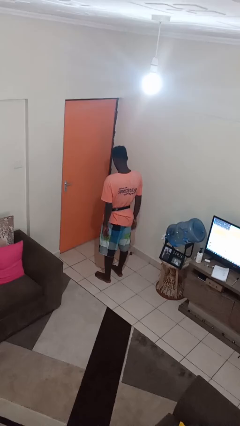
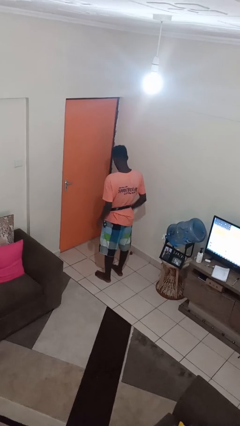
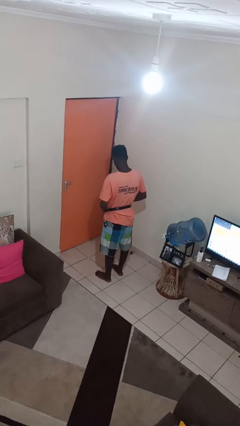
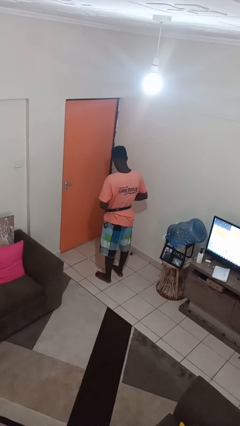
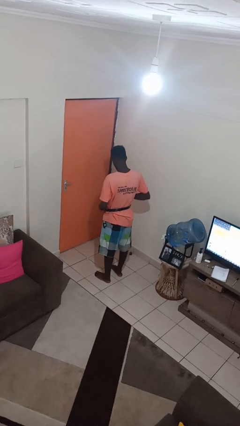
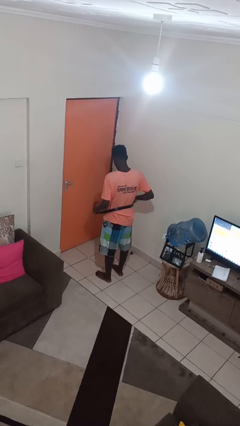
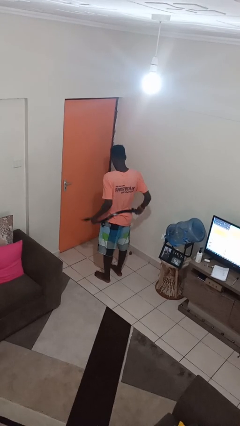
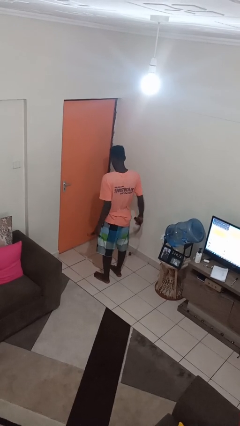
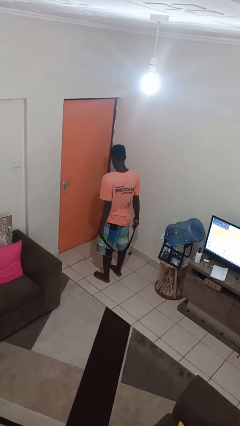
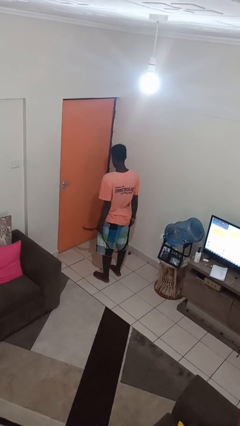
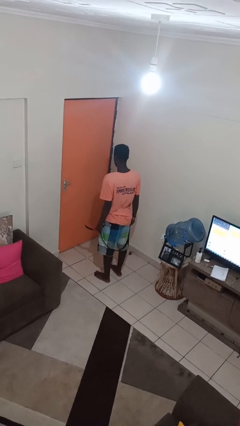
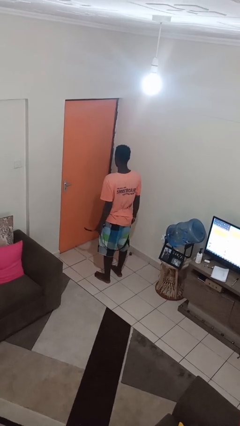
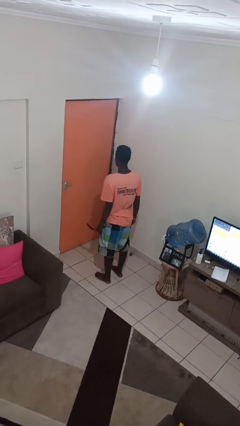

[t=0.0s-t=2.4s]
person takes off belt

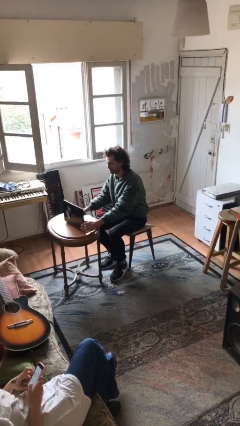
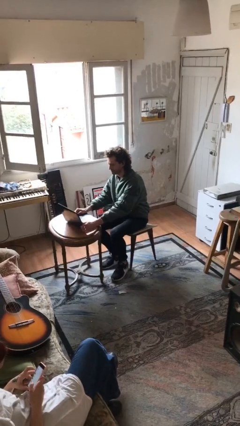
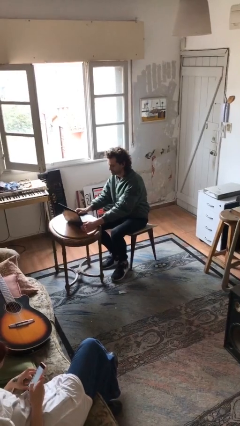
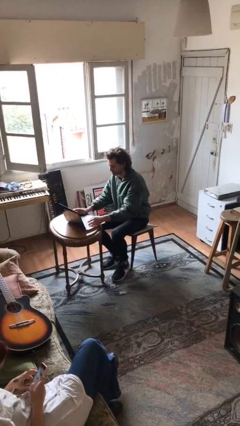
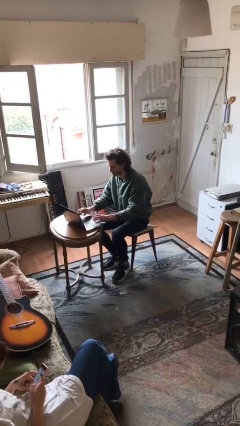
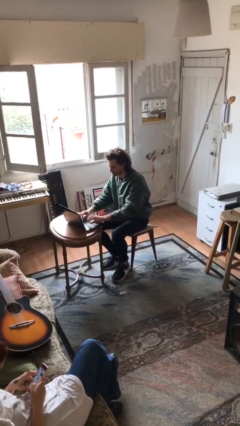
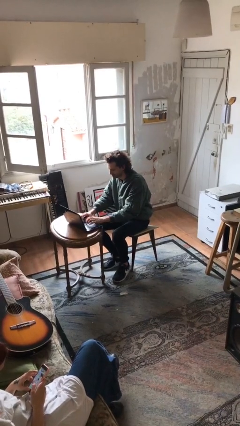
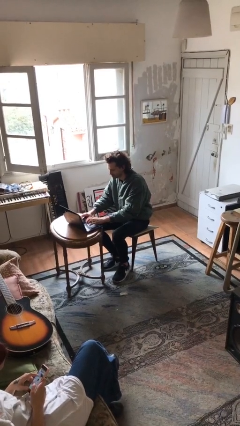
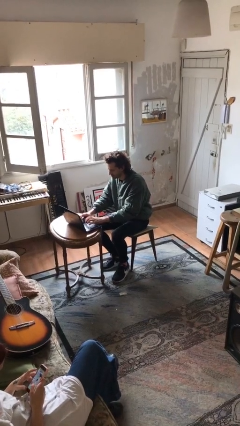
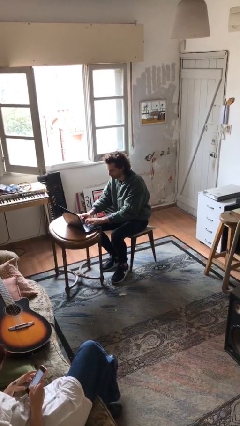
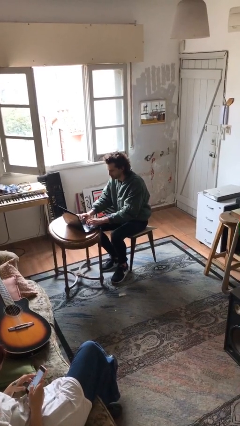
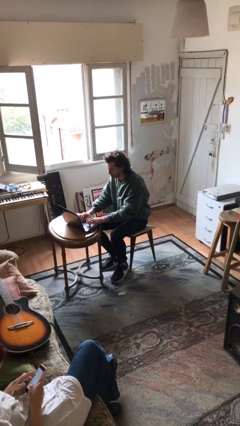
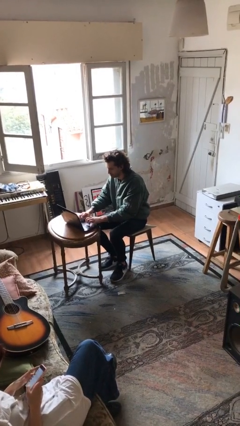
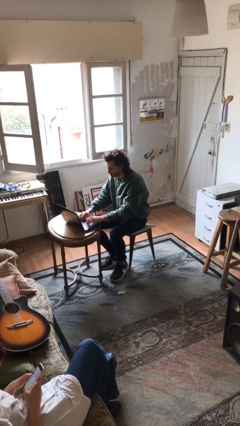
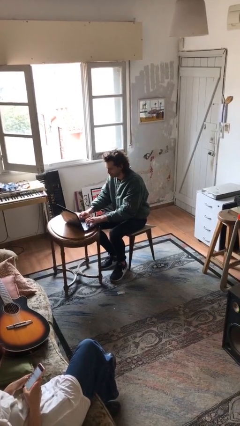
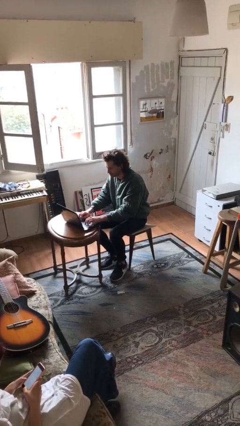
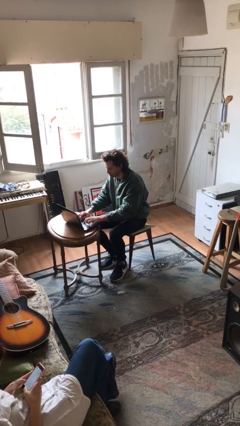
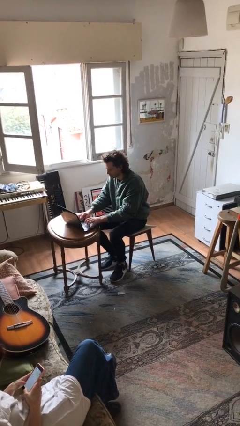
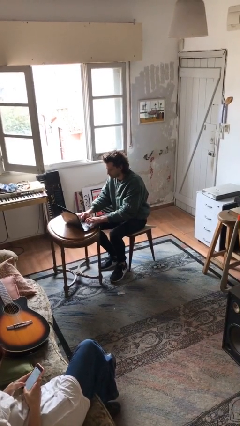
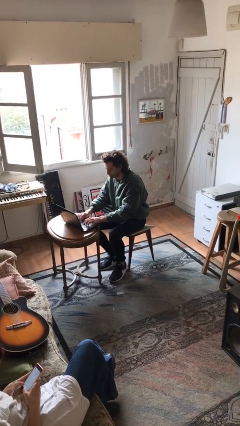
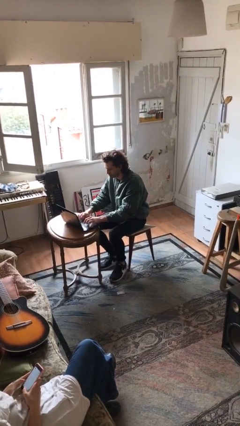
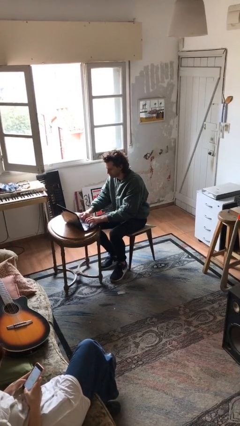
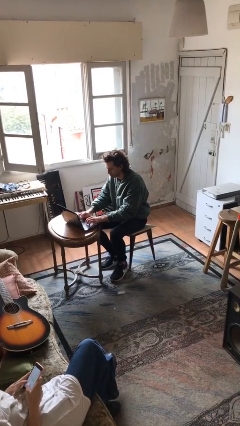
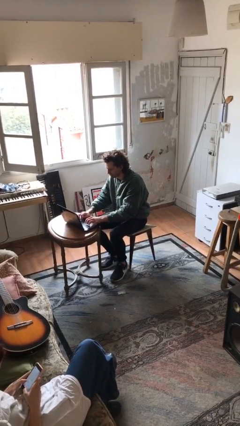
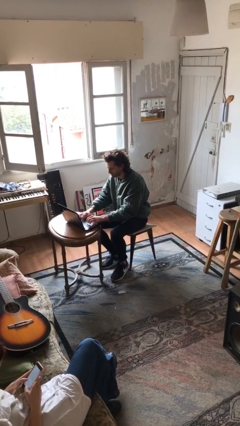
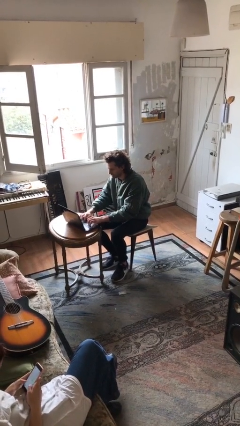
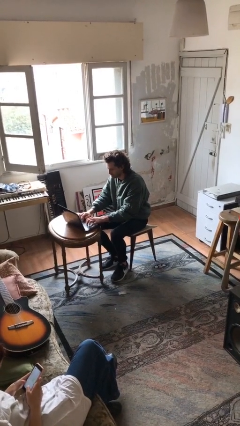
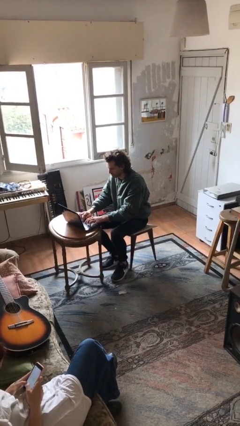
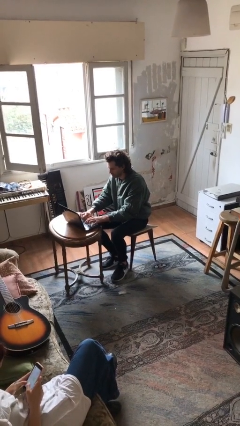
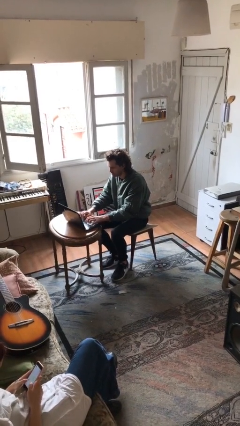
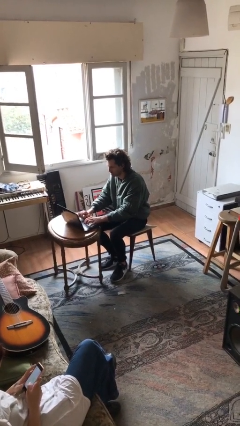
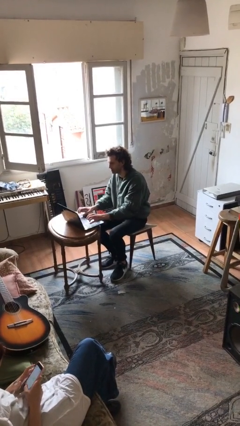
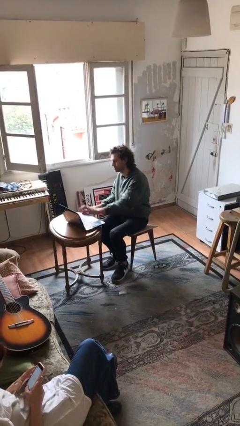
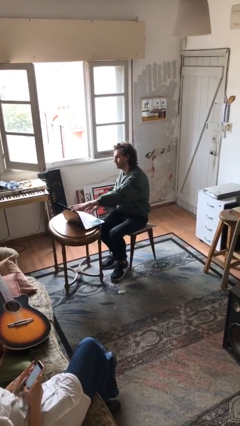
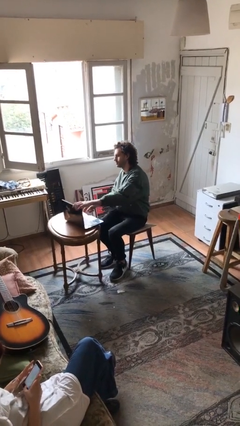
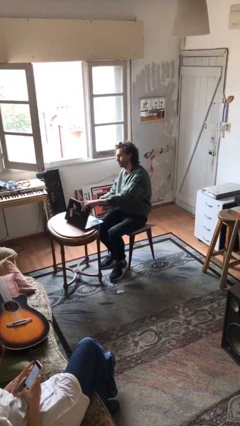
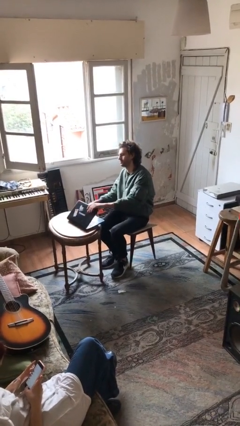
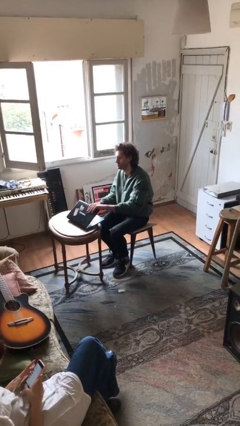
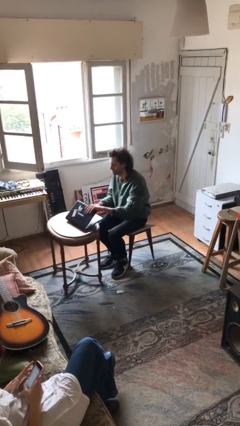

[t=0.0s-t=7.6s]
person interacts with laptop

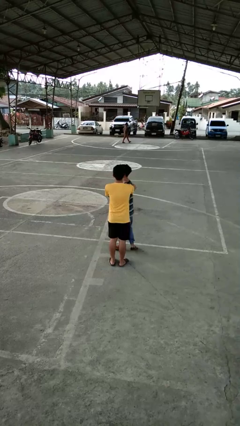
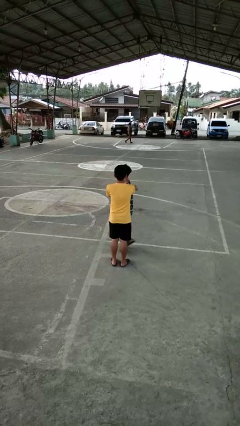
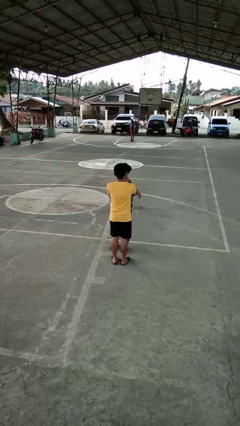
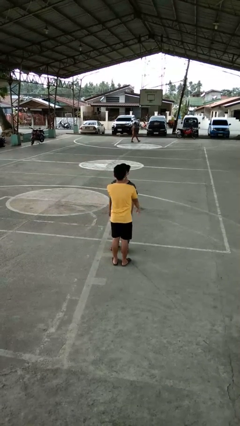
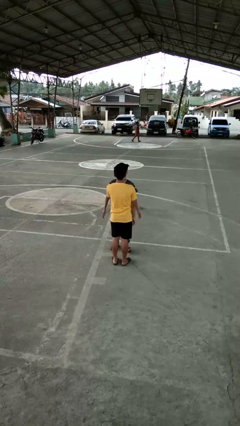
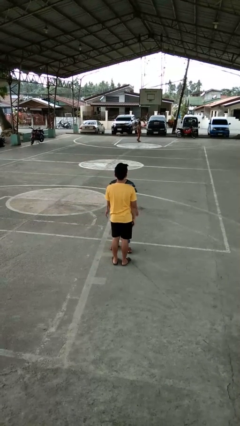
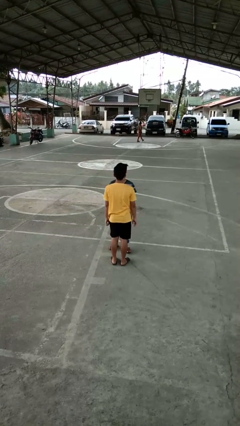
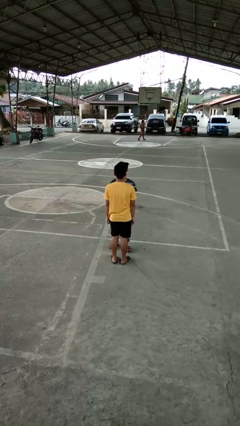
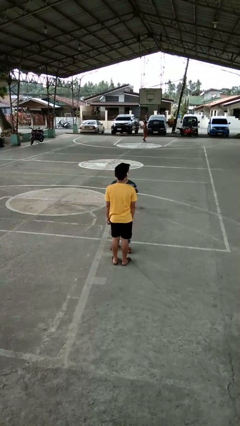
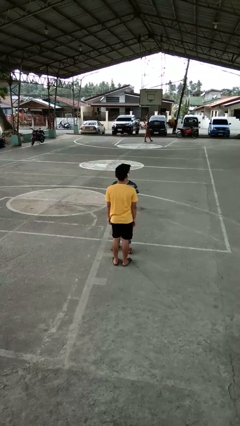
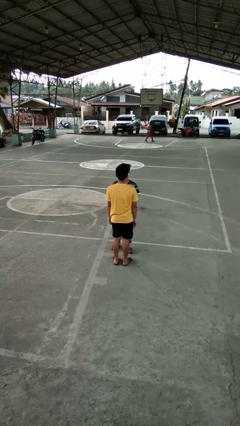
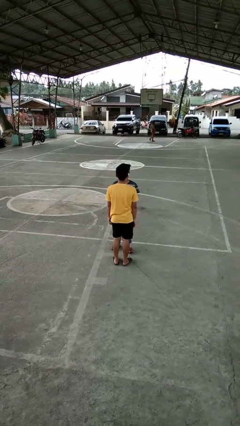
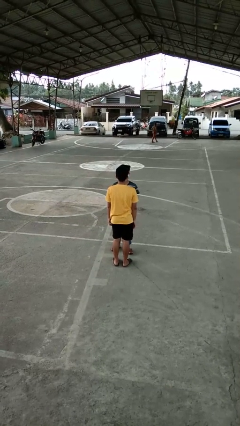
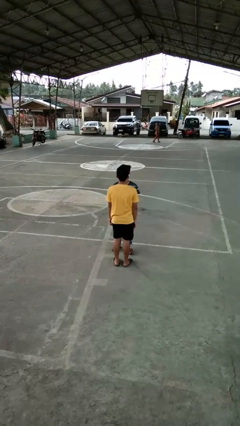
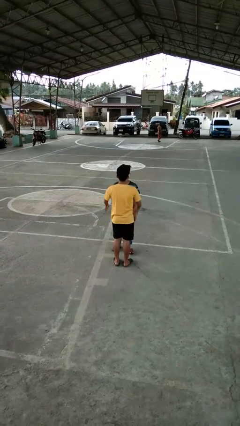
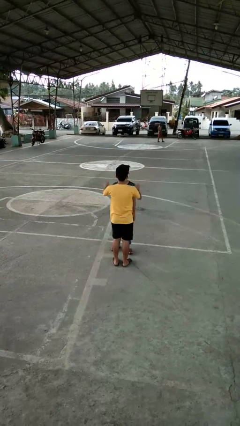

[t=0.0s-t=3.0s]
person spins person around

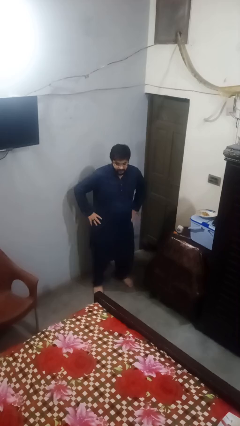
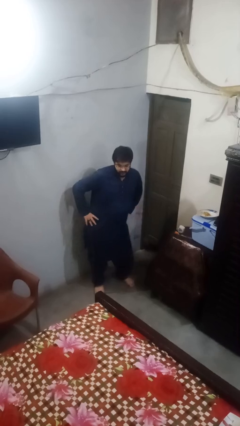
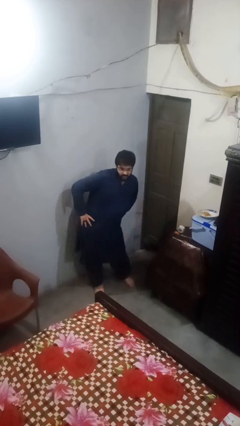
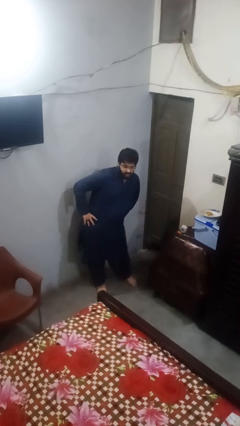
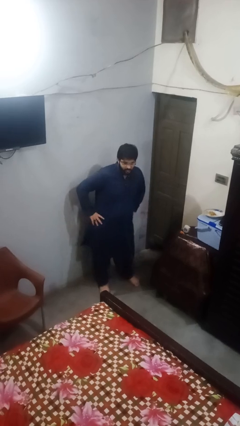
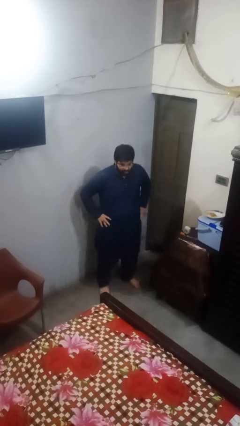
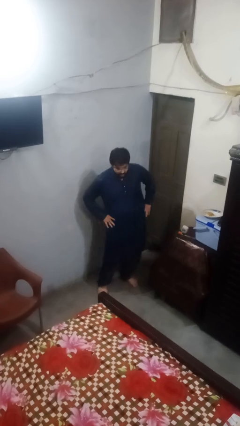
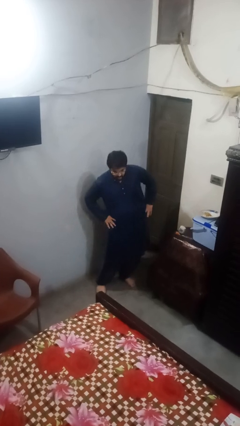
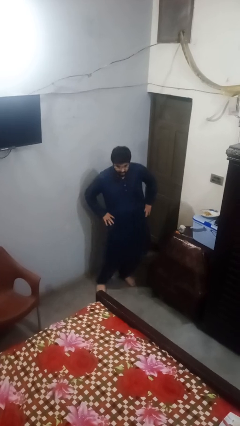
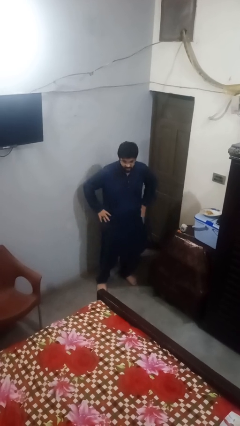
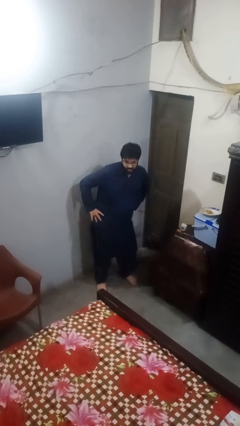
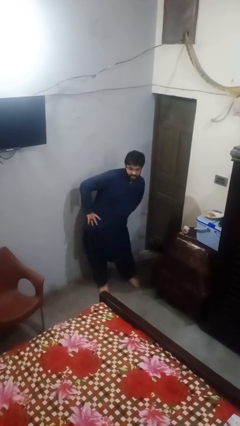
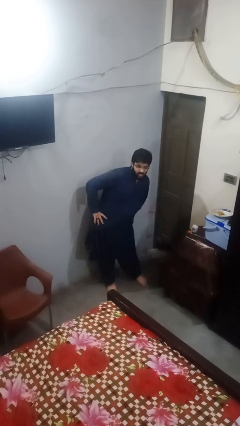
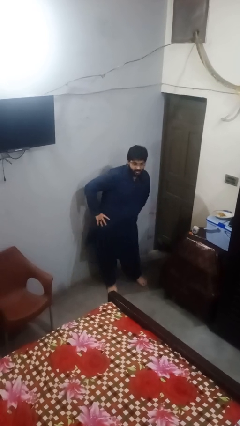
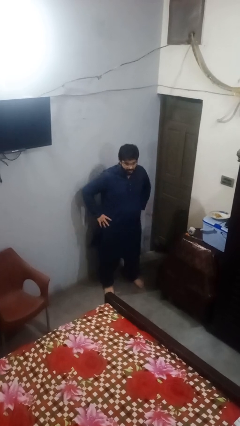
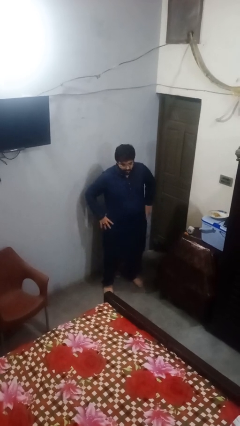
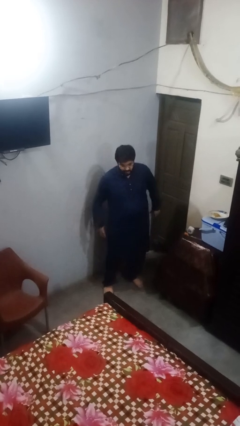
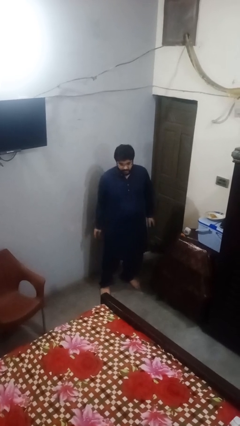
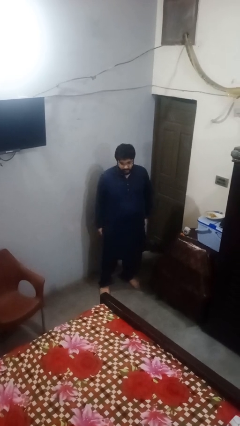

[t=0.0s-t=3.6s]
person wiggles hips

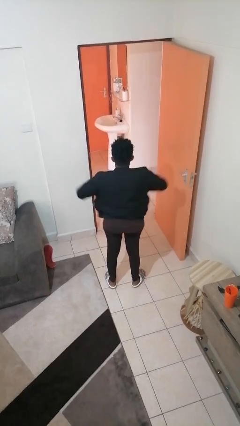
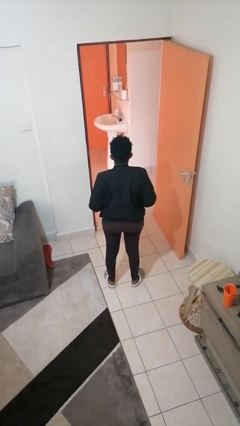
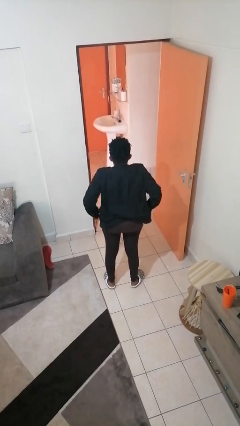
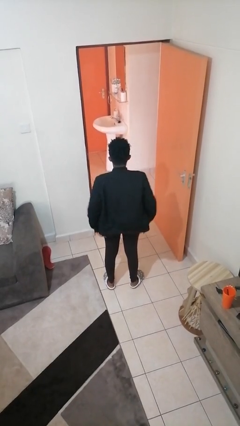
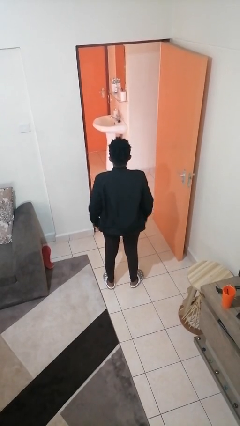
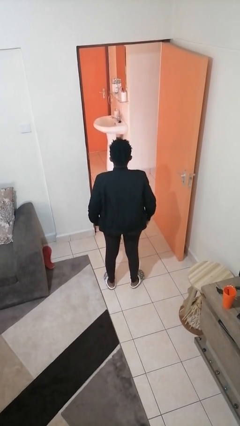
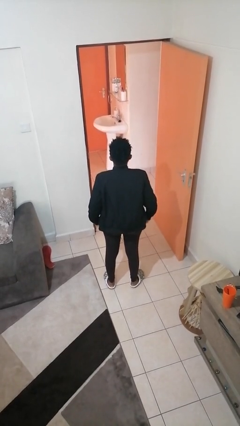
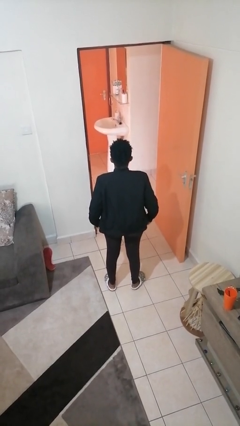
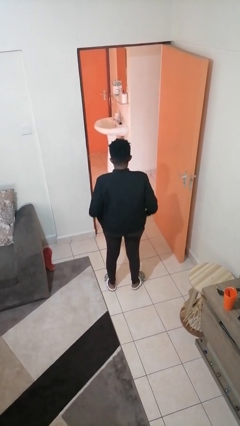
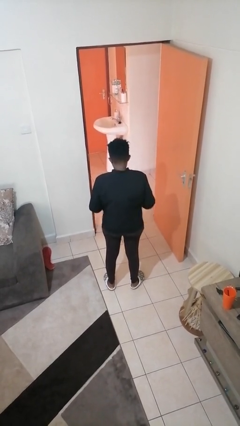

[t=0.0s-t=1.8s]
person puts on jacket
